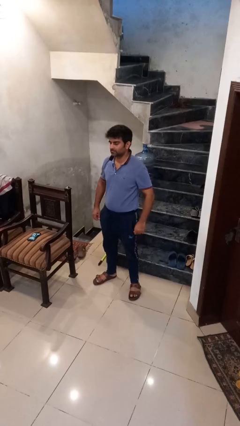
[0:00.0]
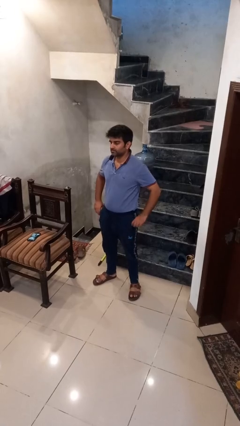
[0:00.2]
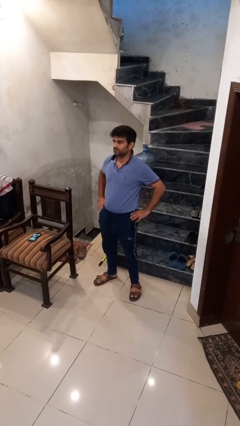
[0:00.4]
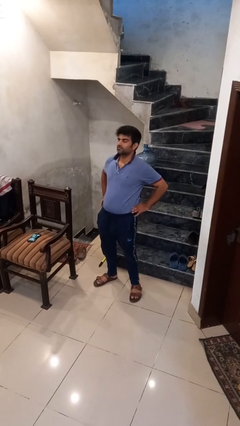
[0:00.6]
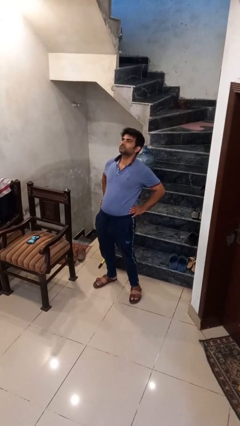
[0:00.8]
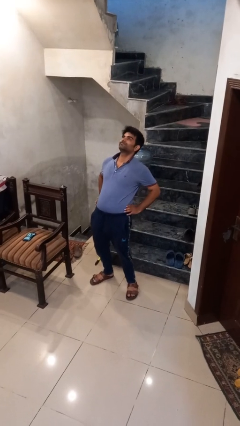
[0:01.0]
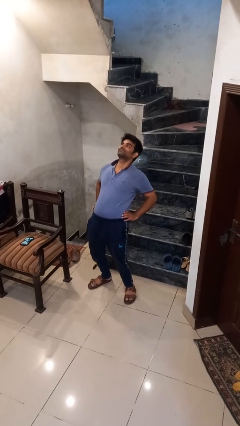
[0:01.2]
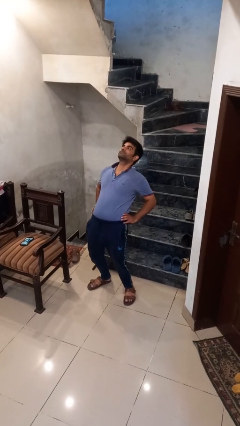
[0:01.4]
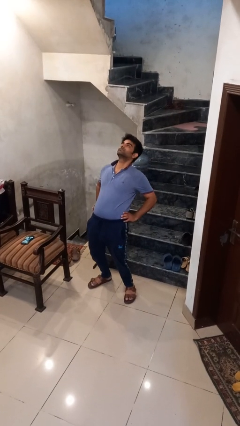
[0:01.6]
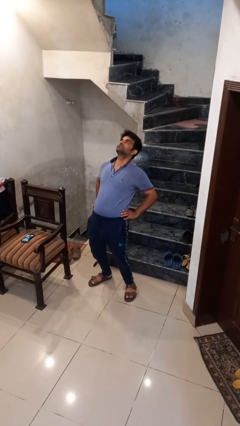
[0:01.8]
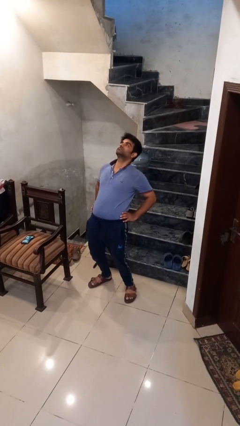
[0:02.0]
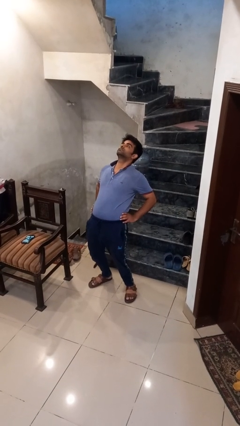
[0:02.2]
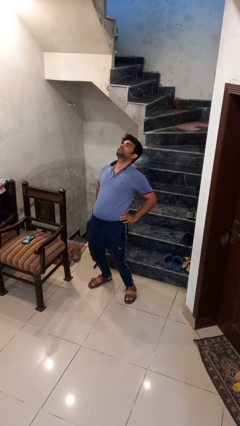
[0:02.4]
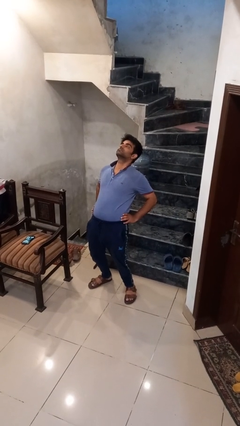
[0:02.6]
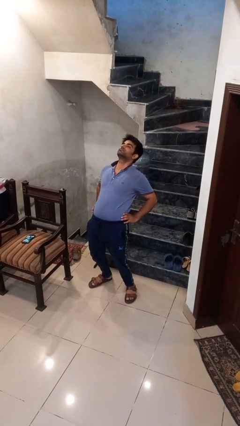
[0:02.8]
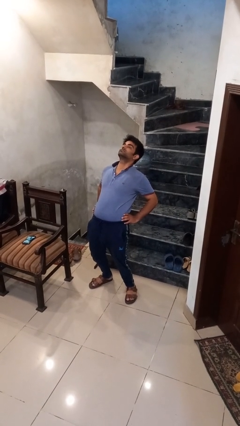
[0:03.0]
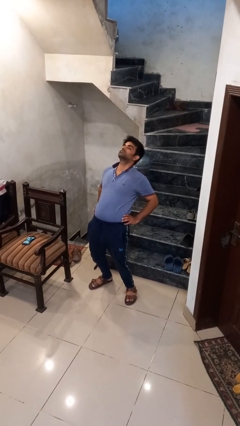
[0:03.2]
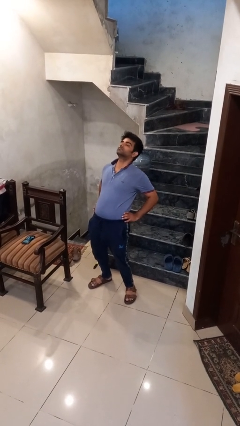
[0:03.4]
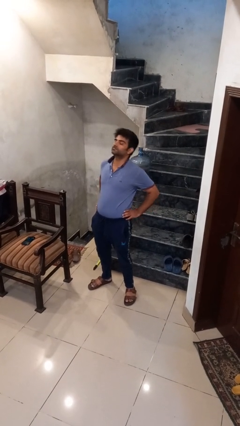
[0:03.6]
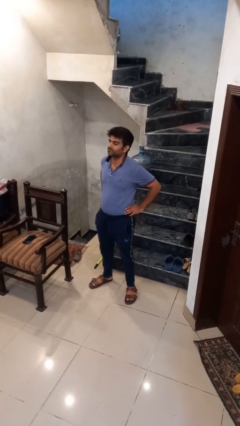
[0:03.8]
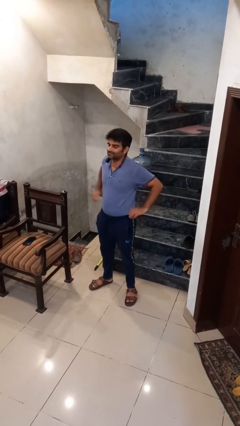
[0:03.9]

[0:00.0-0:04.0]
person stretches back

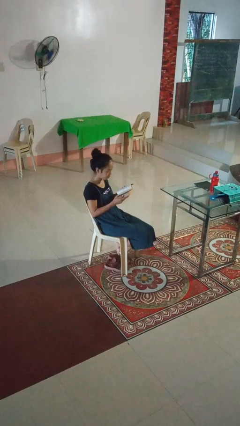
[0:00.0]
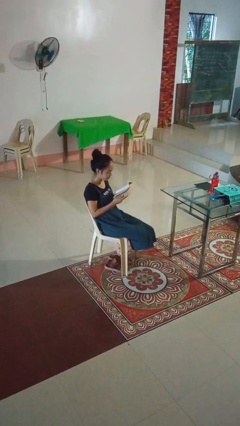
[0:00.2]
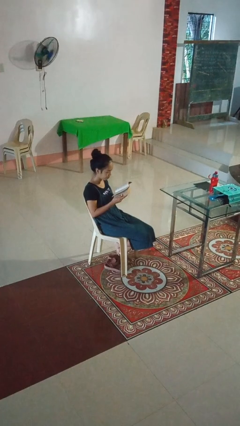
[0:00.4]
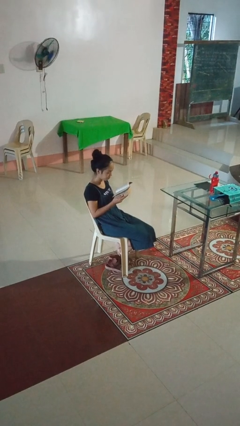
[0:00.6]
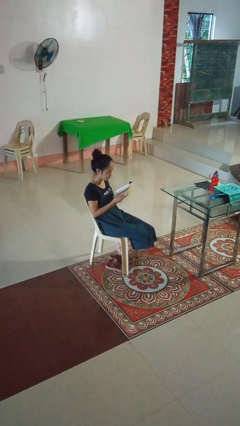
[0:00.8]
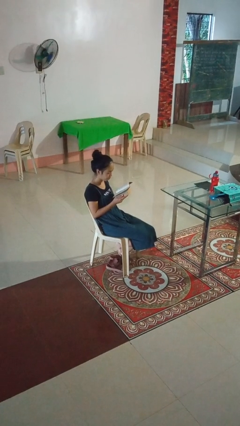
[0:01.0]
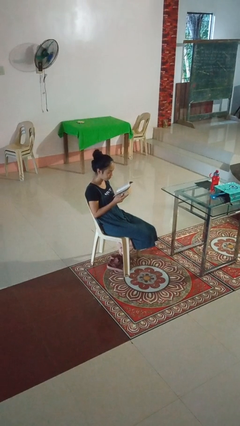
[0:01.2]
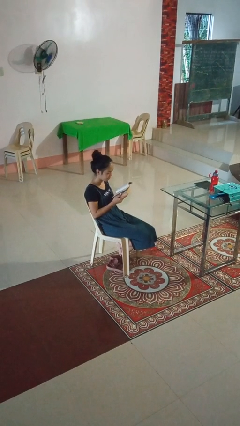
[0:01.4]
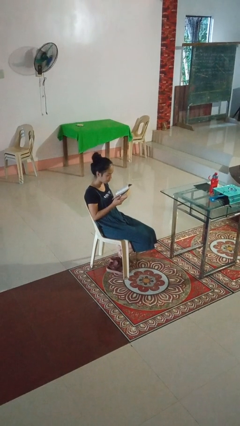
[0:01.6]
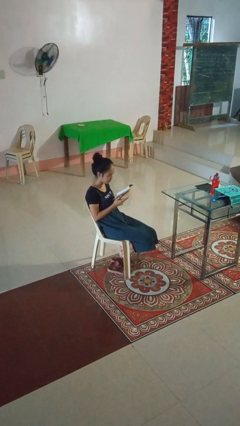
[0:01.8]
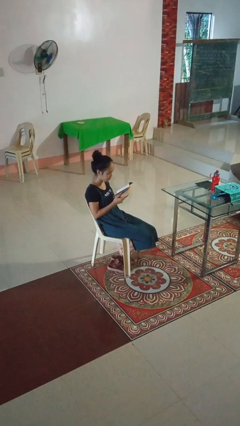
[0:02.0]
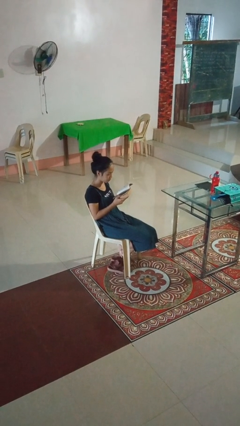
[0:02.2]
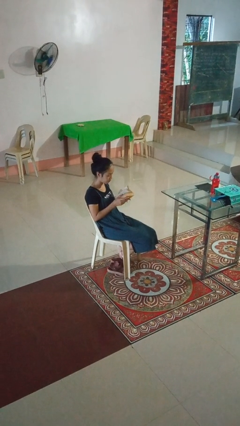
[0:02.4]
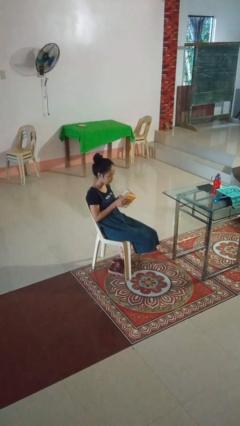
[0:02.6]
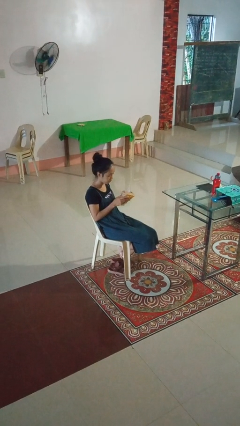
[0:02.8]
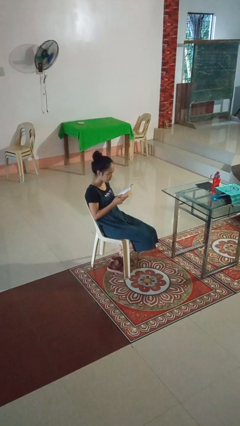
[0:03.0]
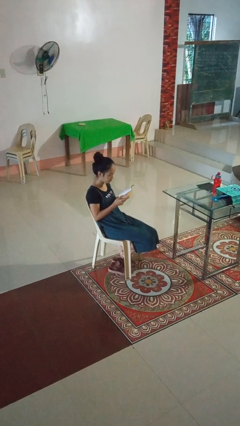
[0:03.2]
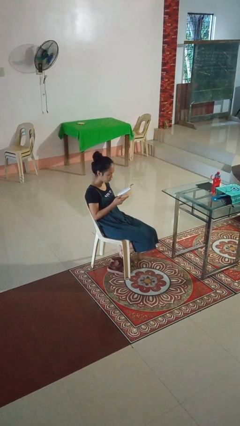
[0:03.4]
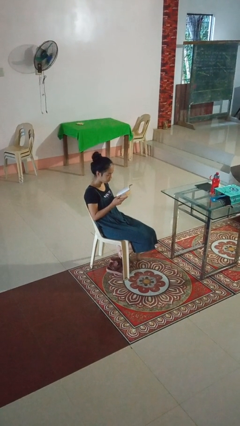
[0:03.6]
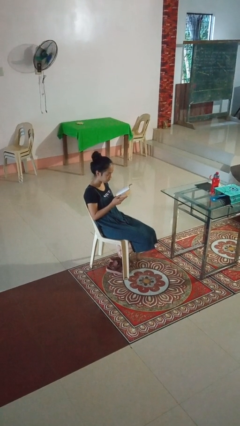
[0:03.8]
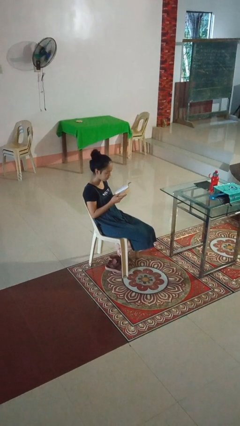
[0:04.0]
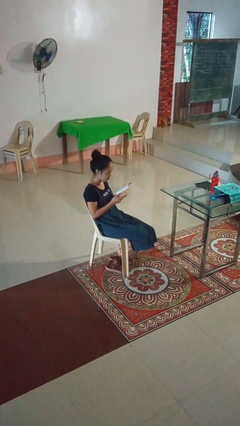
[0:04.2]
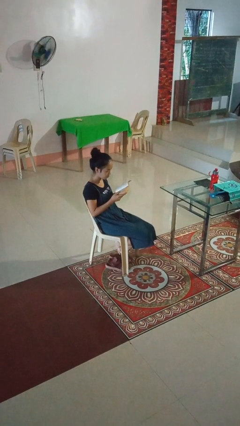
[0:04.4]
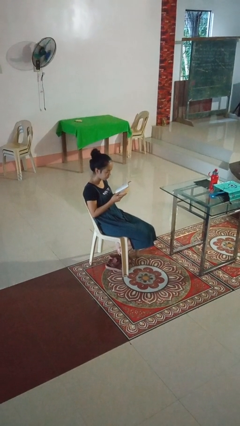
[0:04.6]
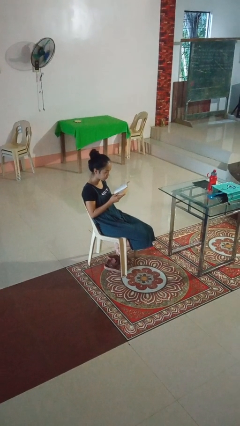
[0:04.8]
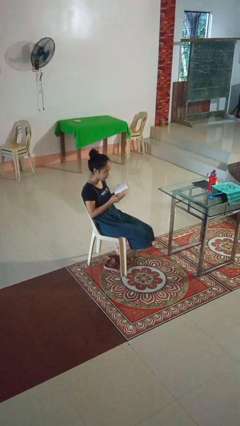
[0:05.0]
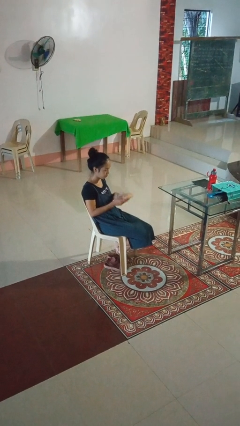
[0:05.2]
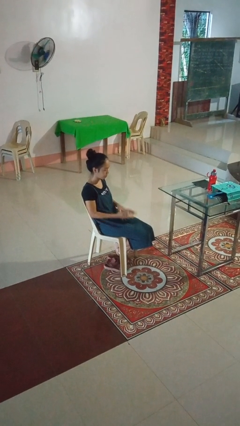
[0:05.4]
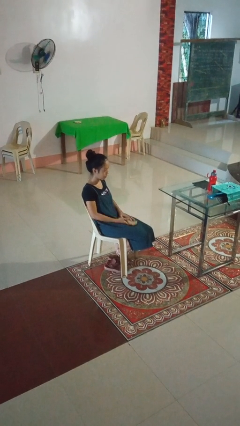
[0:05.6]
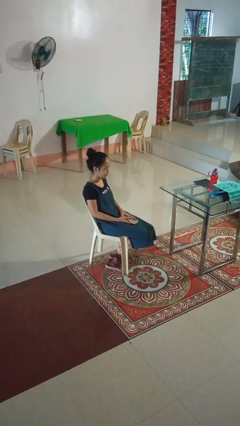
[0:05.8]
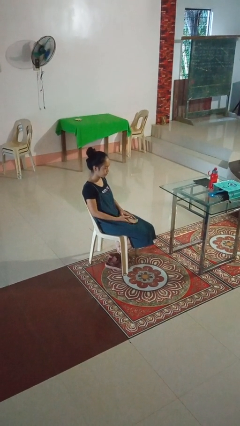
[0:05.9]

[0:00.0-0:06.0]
person reads book

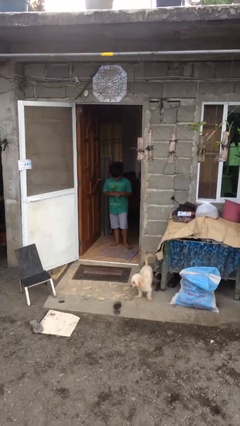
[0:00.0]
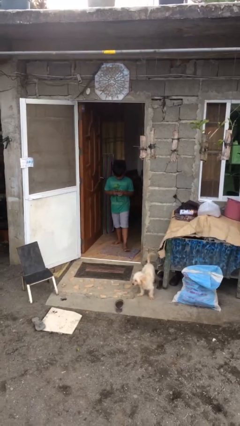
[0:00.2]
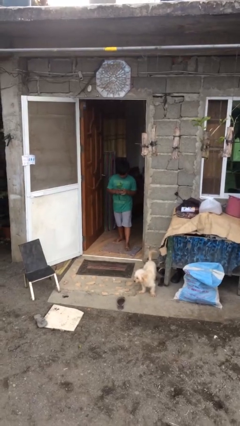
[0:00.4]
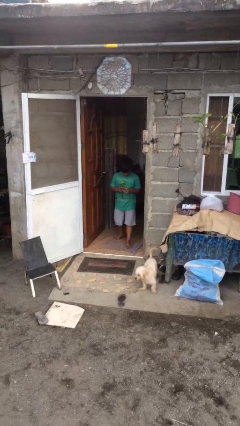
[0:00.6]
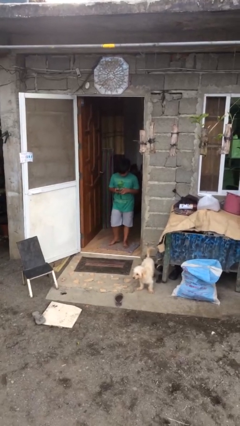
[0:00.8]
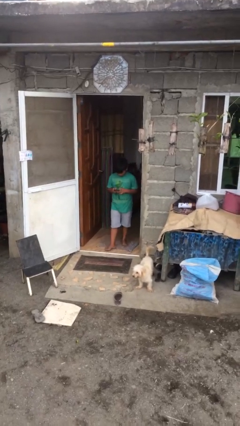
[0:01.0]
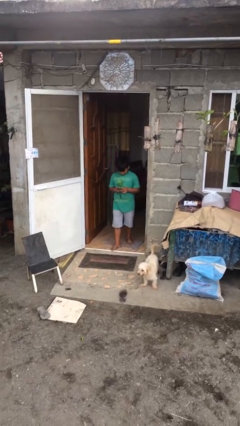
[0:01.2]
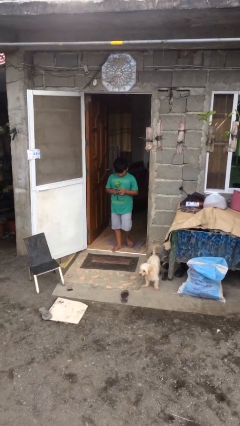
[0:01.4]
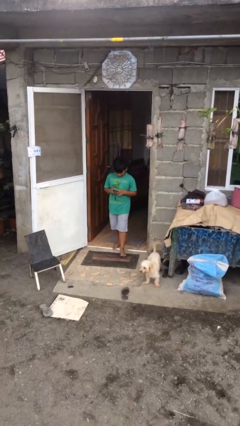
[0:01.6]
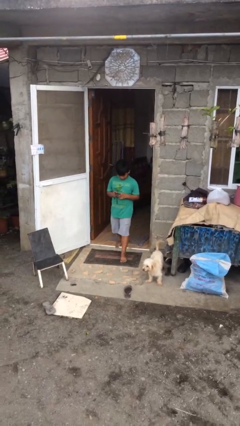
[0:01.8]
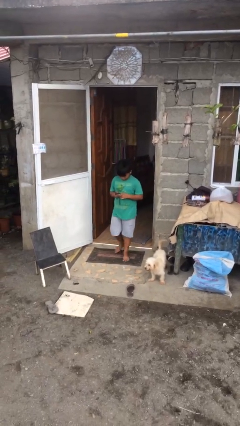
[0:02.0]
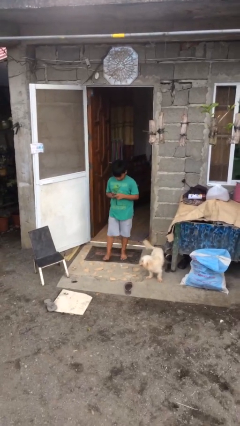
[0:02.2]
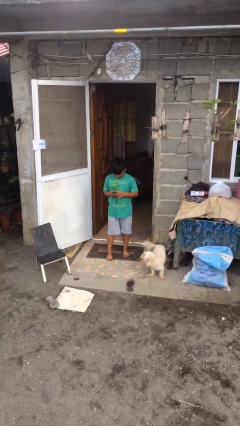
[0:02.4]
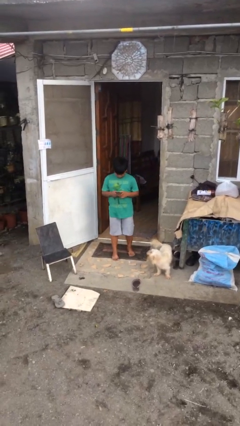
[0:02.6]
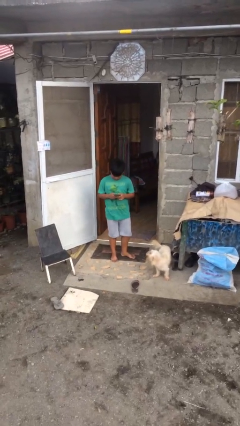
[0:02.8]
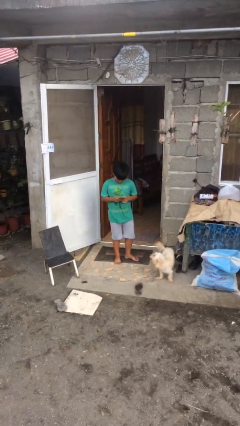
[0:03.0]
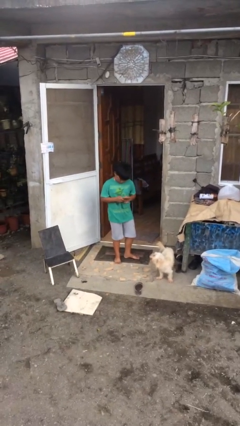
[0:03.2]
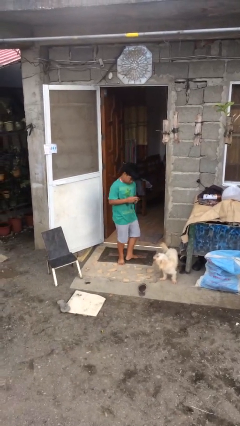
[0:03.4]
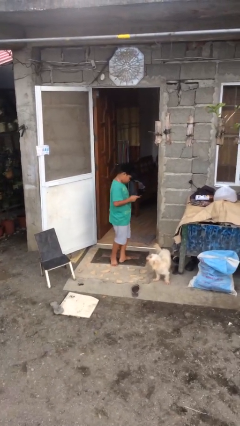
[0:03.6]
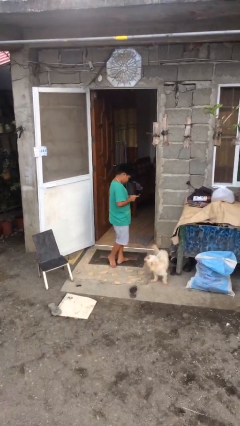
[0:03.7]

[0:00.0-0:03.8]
person enters scene through structure

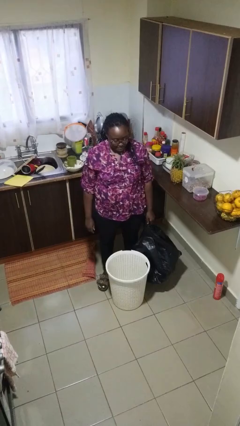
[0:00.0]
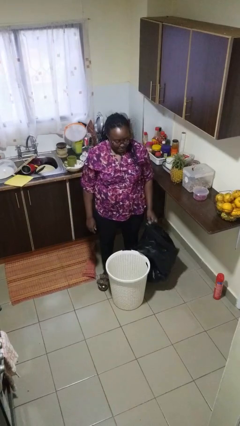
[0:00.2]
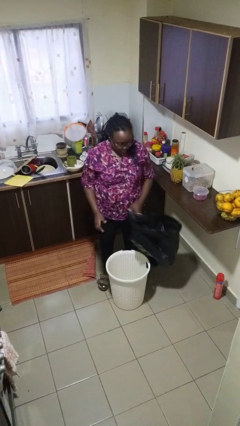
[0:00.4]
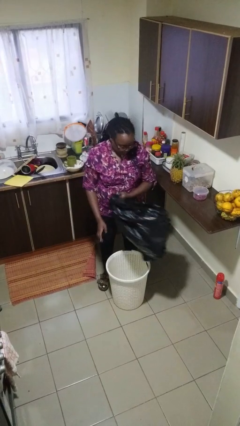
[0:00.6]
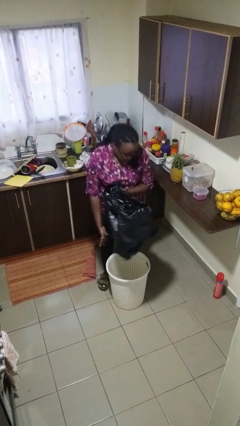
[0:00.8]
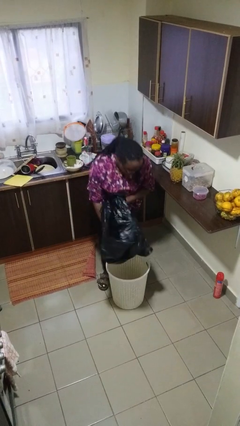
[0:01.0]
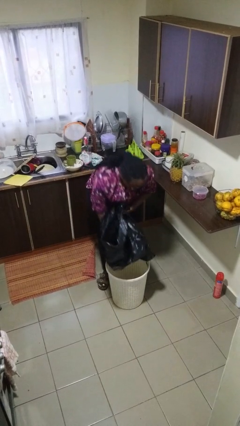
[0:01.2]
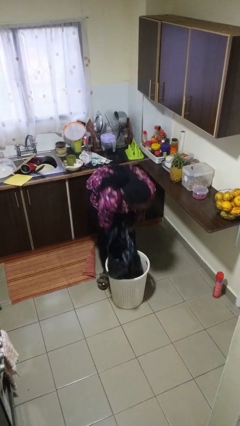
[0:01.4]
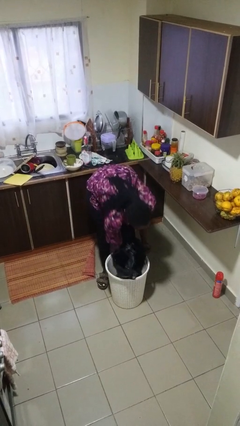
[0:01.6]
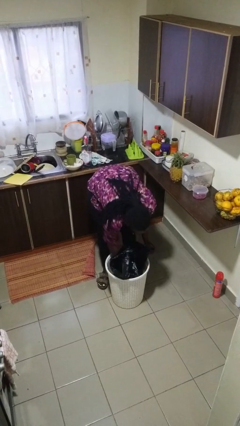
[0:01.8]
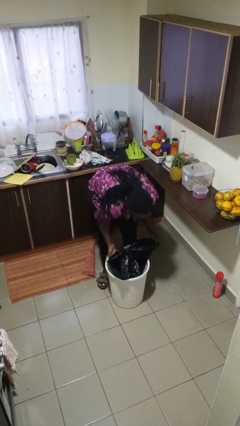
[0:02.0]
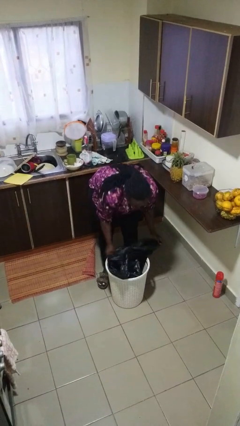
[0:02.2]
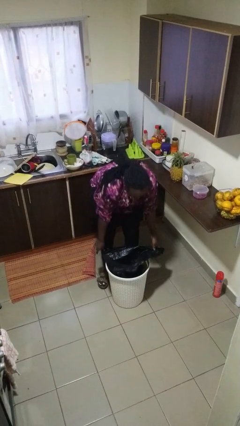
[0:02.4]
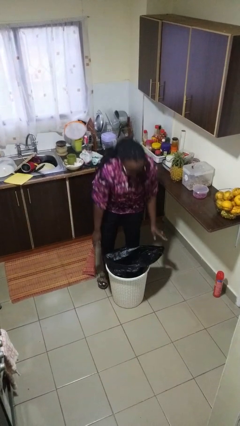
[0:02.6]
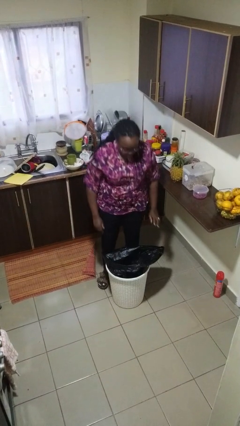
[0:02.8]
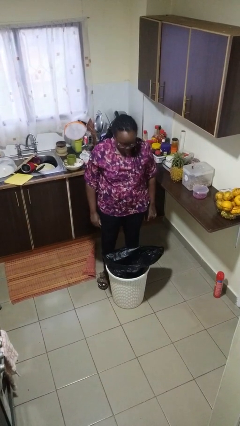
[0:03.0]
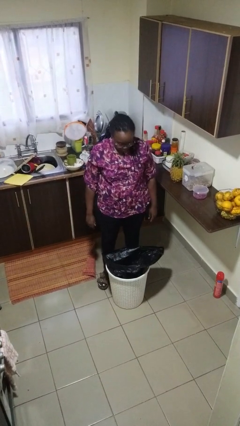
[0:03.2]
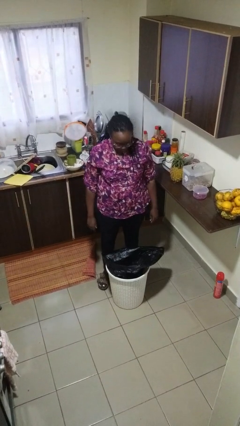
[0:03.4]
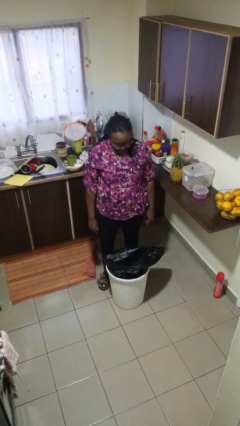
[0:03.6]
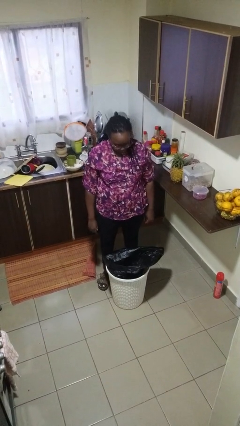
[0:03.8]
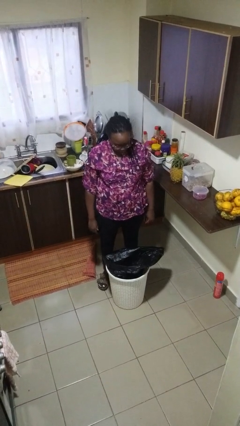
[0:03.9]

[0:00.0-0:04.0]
person removes trashbag from trashcan

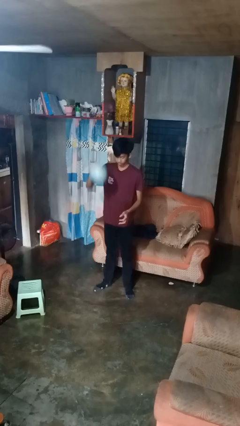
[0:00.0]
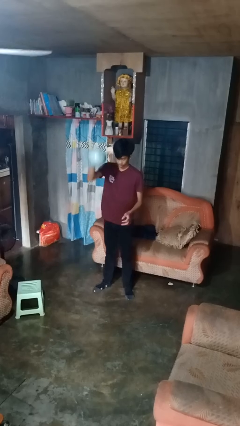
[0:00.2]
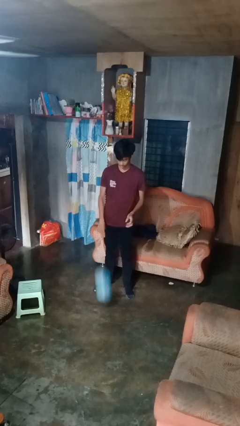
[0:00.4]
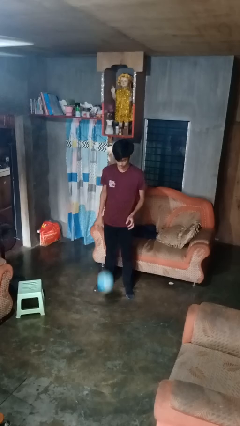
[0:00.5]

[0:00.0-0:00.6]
person bounces ball on floor
